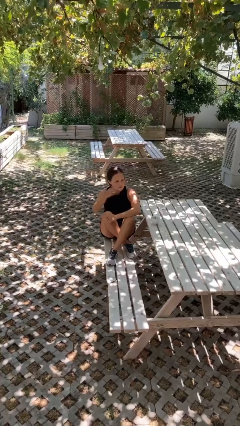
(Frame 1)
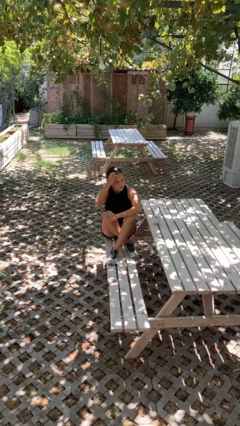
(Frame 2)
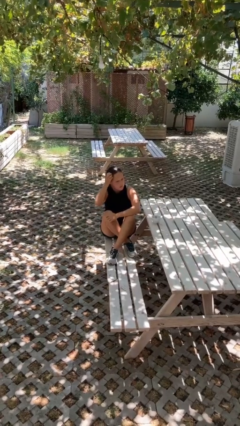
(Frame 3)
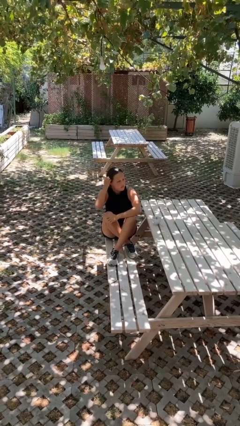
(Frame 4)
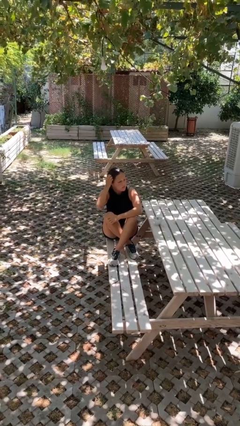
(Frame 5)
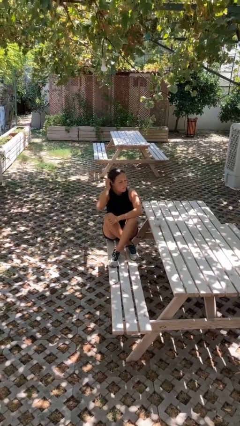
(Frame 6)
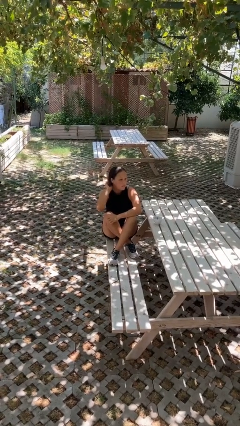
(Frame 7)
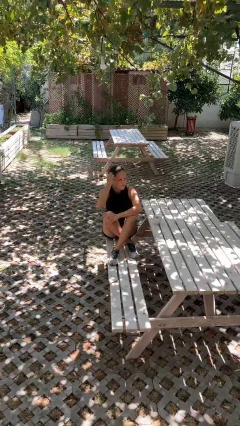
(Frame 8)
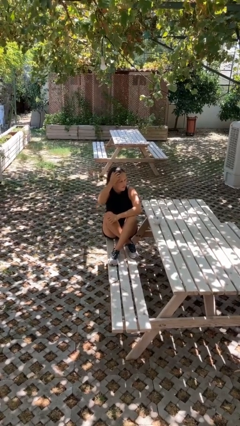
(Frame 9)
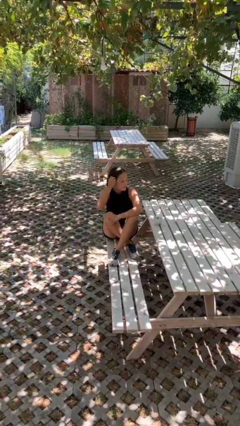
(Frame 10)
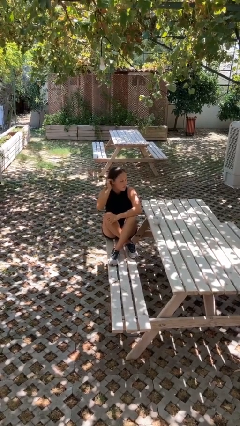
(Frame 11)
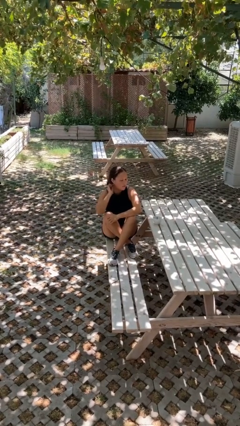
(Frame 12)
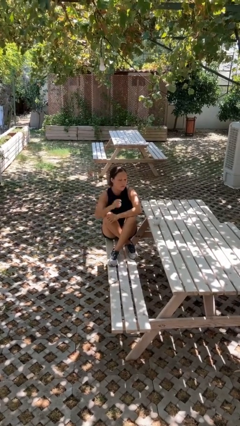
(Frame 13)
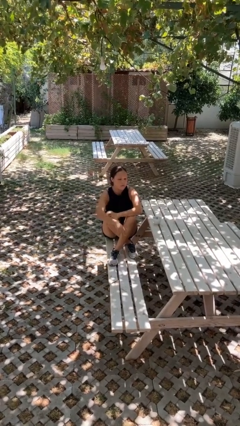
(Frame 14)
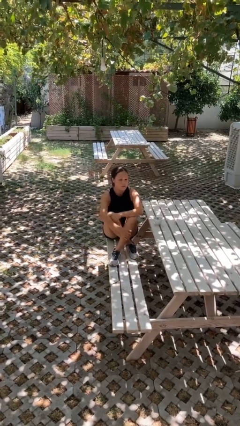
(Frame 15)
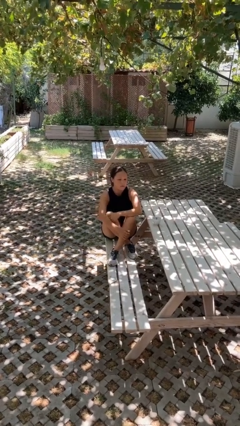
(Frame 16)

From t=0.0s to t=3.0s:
person strokes hair

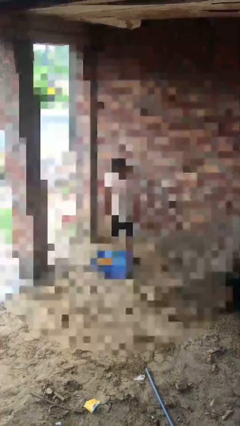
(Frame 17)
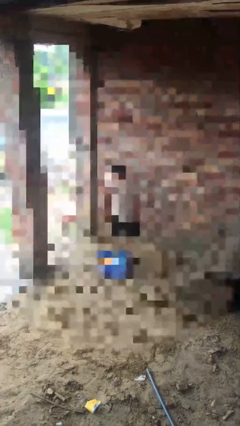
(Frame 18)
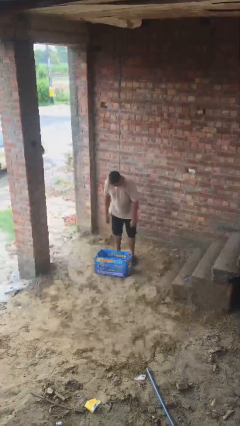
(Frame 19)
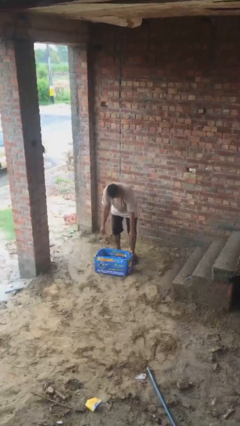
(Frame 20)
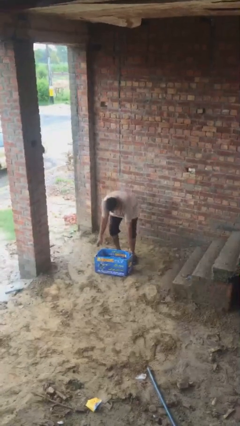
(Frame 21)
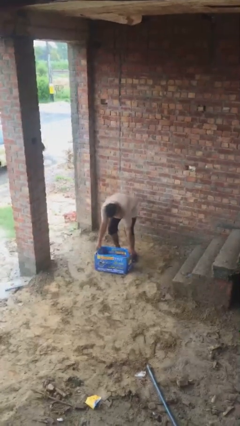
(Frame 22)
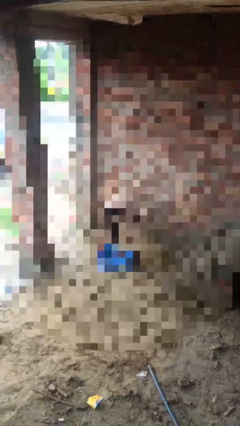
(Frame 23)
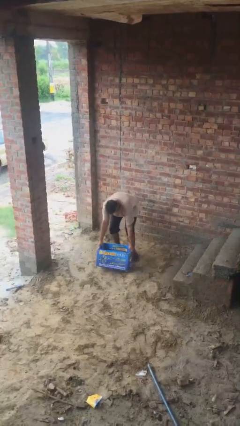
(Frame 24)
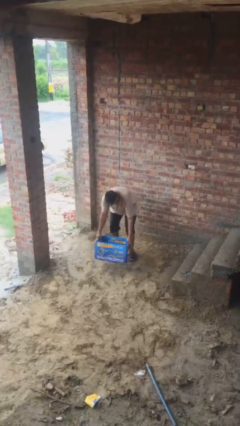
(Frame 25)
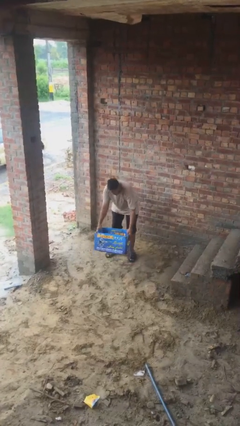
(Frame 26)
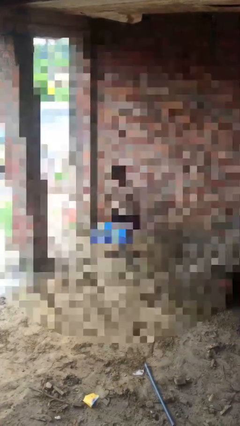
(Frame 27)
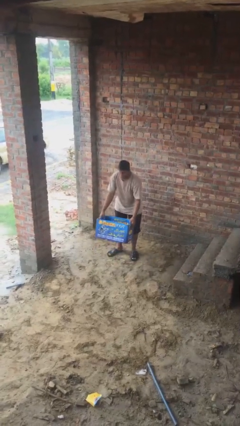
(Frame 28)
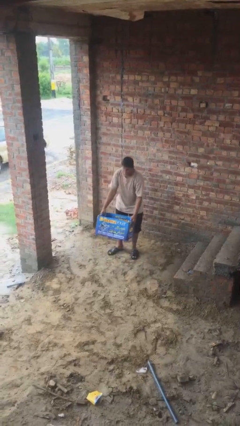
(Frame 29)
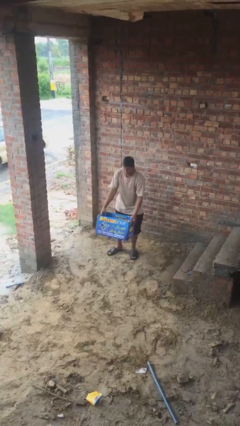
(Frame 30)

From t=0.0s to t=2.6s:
person picks up object from floor

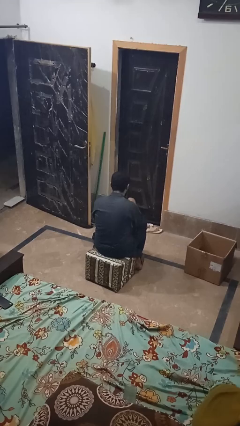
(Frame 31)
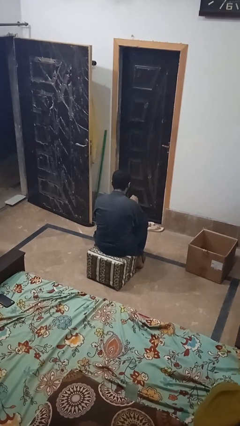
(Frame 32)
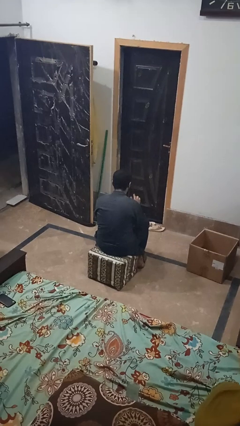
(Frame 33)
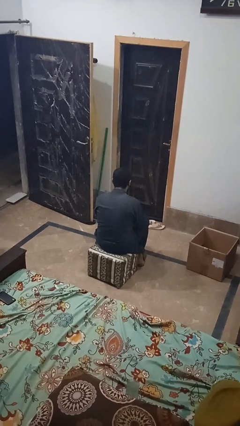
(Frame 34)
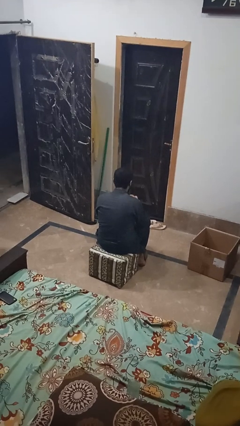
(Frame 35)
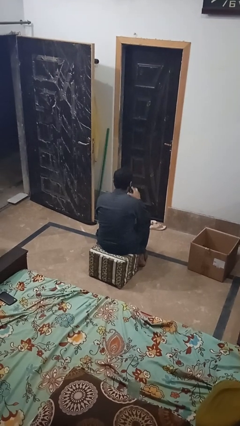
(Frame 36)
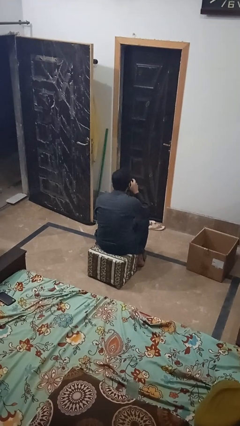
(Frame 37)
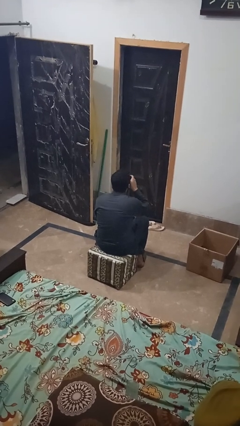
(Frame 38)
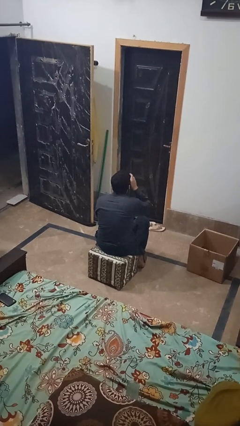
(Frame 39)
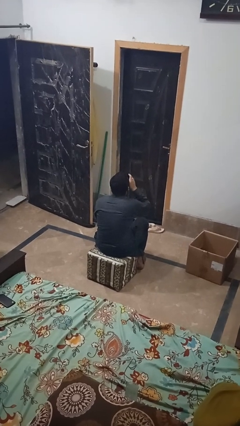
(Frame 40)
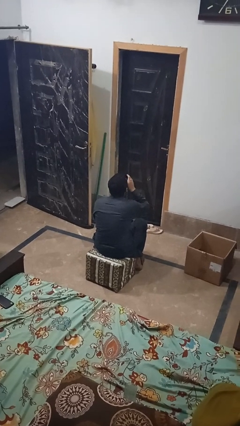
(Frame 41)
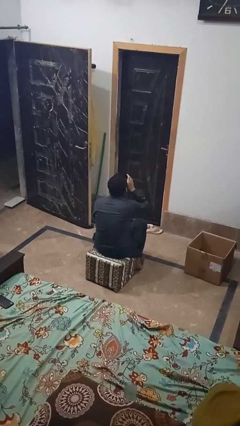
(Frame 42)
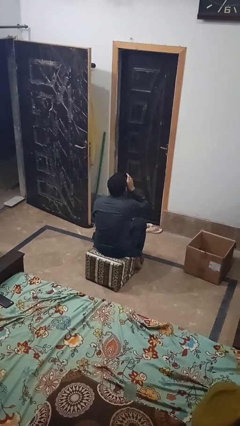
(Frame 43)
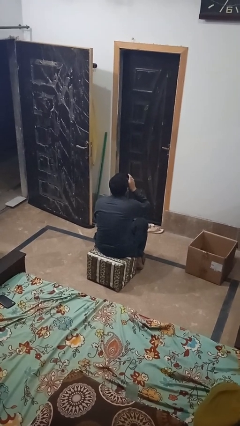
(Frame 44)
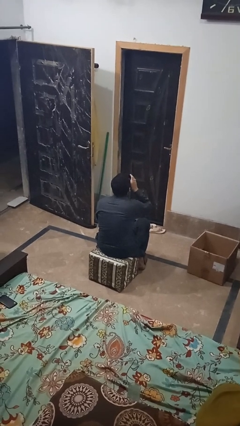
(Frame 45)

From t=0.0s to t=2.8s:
person drinks from mug

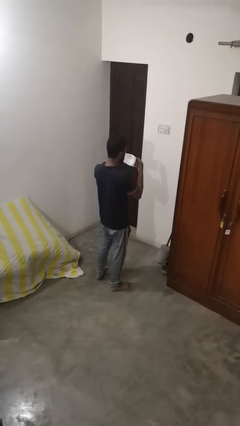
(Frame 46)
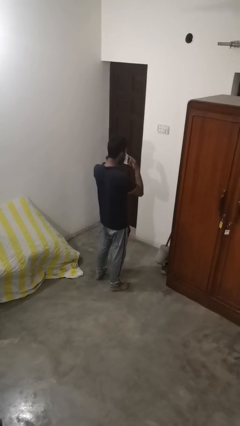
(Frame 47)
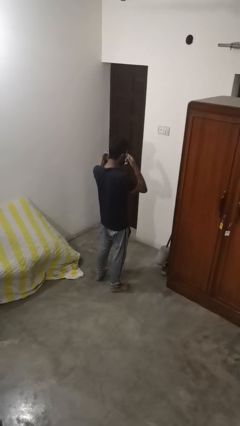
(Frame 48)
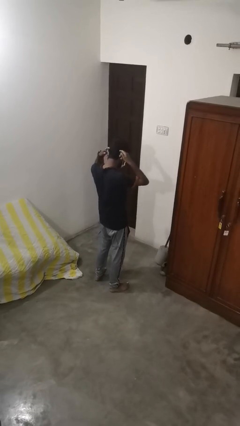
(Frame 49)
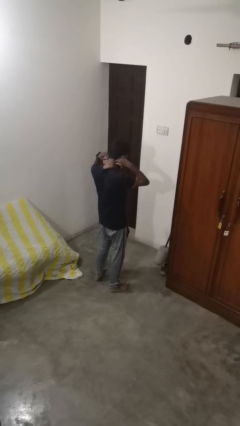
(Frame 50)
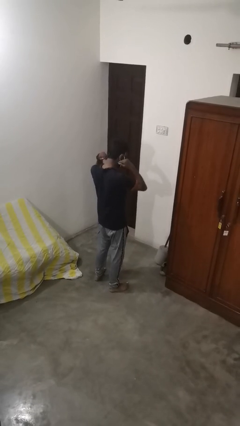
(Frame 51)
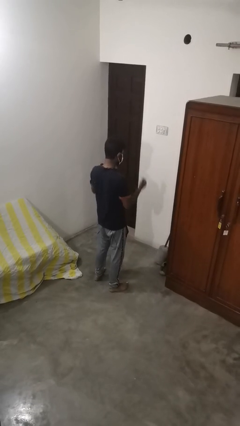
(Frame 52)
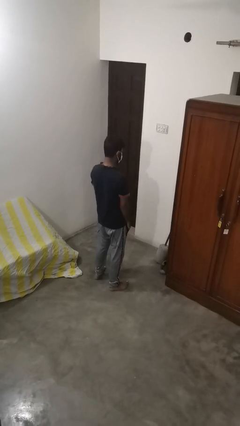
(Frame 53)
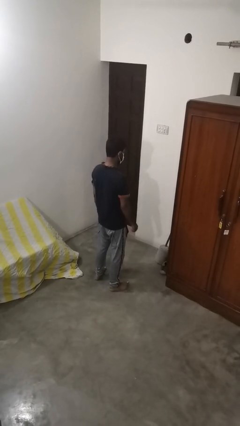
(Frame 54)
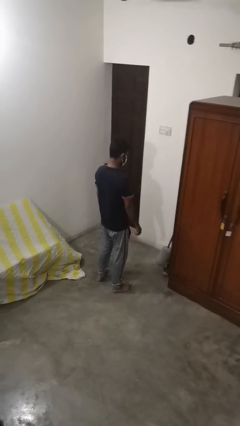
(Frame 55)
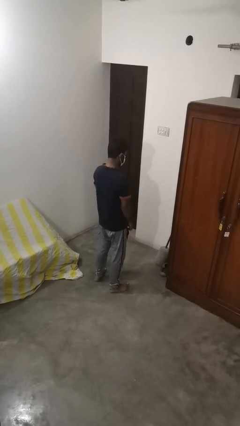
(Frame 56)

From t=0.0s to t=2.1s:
person puts on facemask

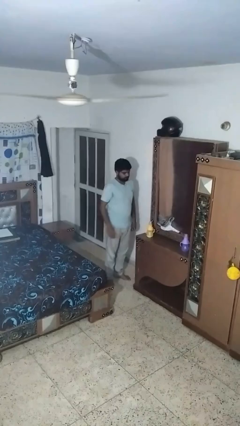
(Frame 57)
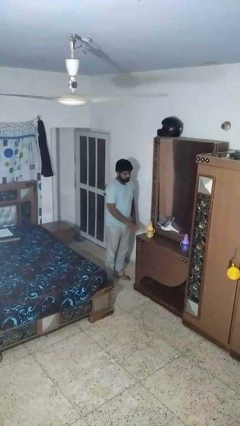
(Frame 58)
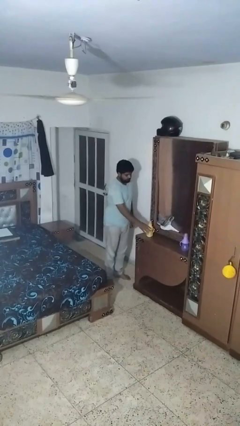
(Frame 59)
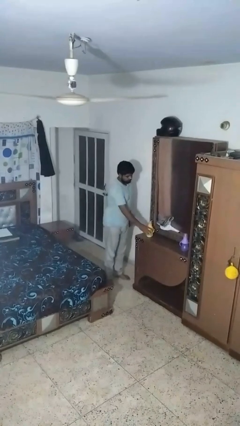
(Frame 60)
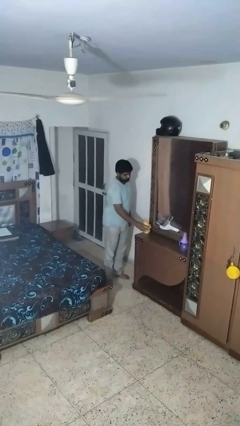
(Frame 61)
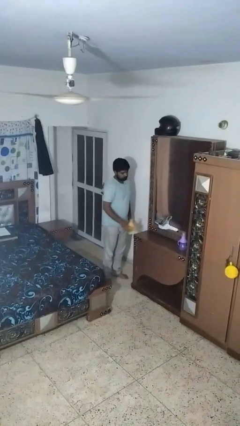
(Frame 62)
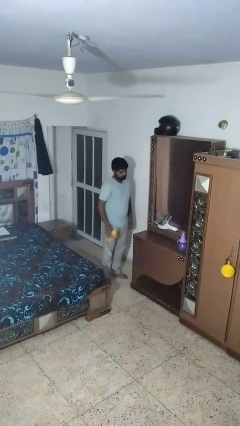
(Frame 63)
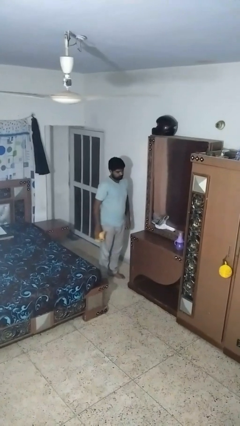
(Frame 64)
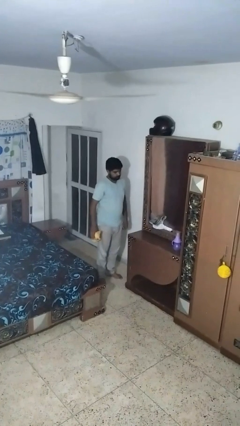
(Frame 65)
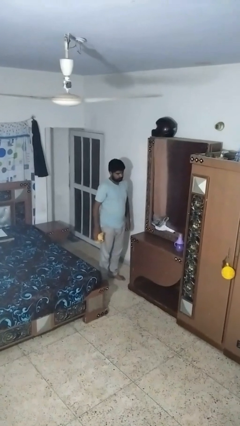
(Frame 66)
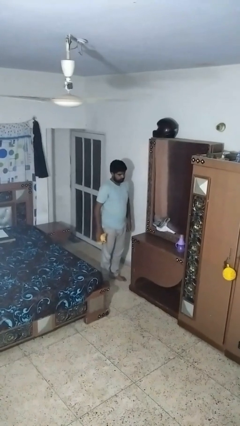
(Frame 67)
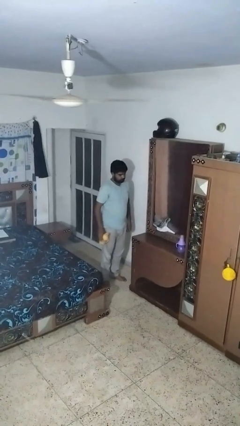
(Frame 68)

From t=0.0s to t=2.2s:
person picks up object from countertop

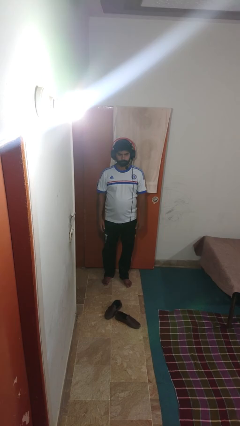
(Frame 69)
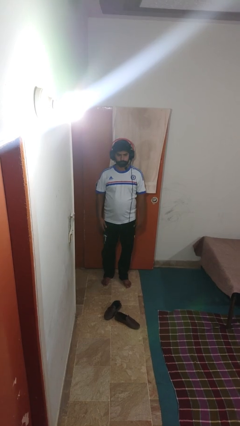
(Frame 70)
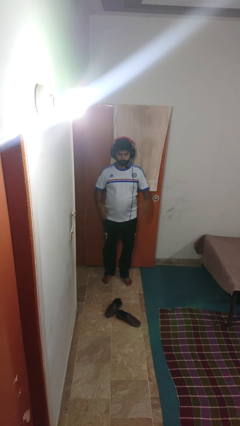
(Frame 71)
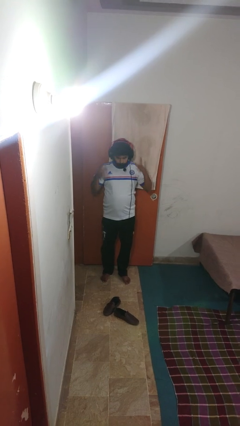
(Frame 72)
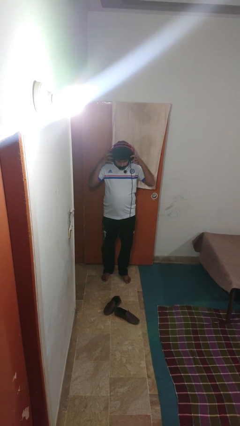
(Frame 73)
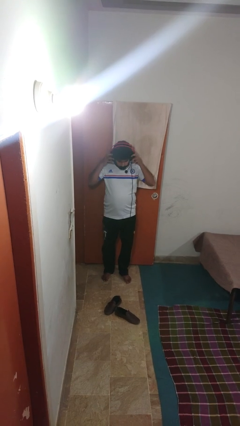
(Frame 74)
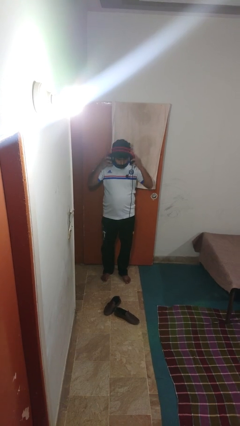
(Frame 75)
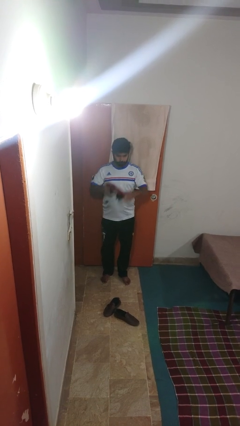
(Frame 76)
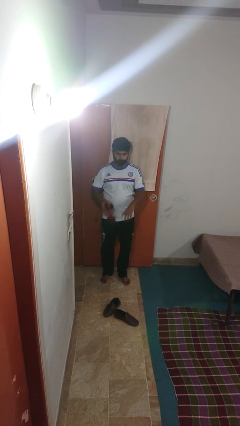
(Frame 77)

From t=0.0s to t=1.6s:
person takes off headphones

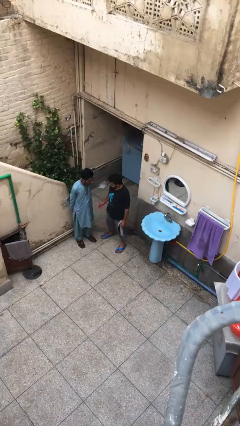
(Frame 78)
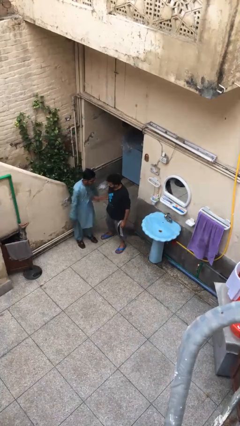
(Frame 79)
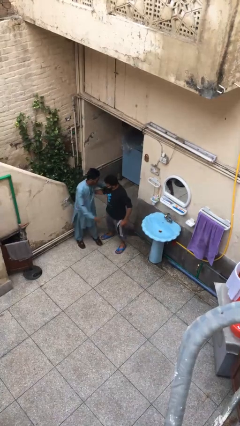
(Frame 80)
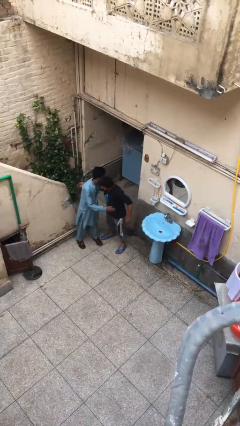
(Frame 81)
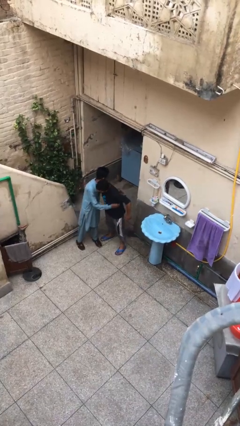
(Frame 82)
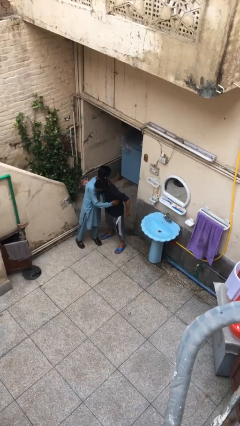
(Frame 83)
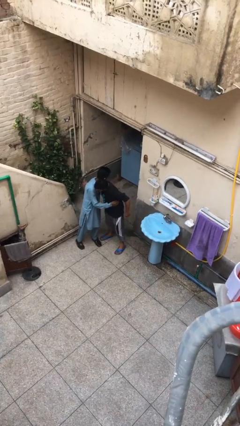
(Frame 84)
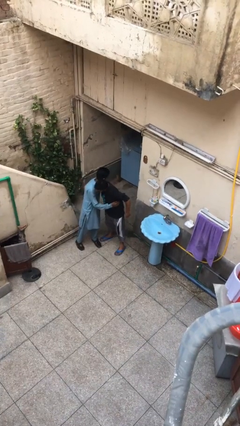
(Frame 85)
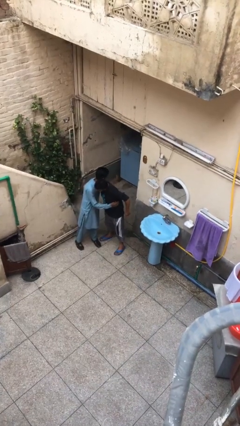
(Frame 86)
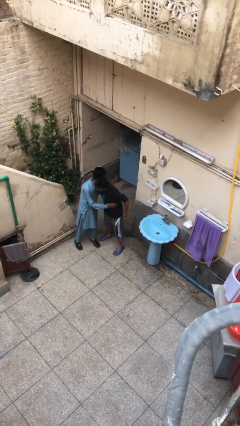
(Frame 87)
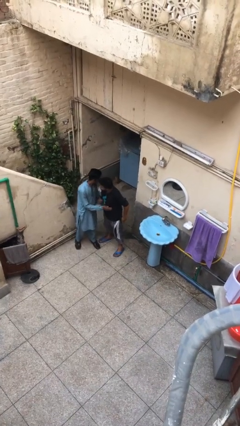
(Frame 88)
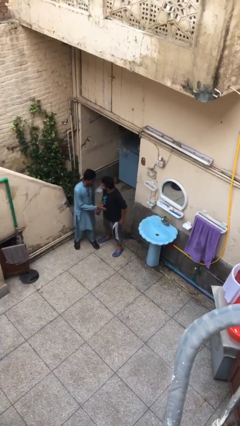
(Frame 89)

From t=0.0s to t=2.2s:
person embraces person

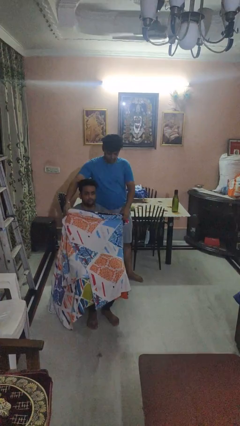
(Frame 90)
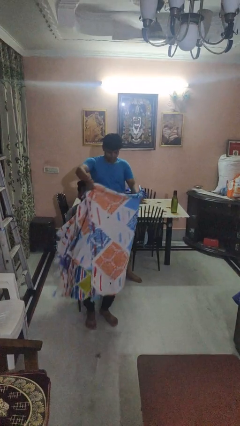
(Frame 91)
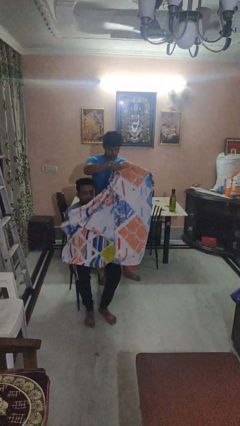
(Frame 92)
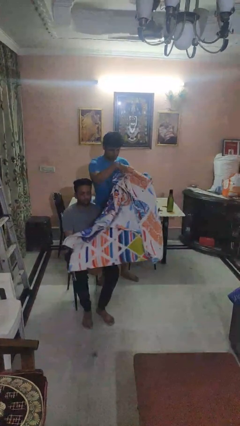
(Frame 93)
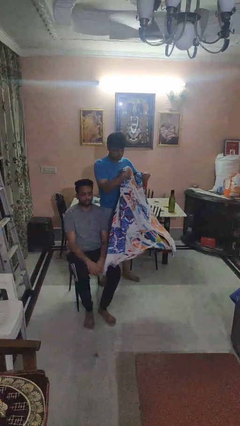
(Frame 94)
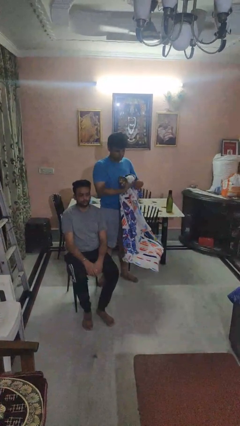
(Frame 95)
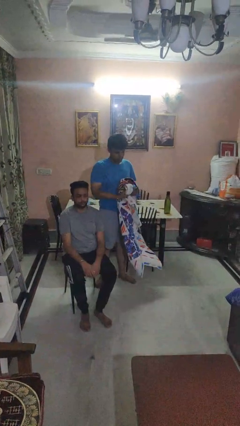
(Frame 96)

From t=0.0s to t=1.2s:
person uncovers friend with blanket
